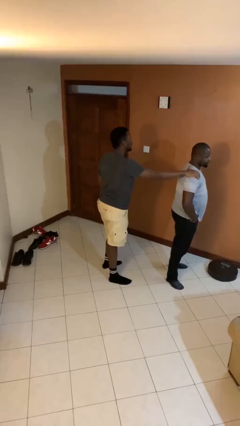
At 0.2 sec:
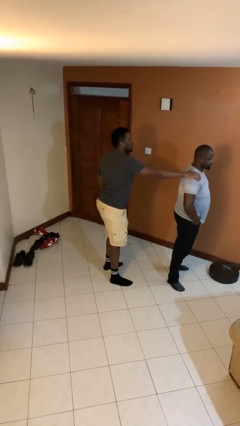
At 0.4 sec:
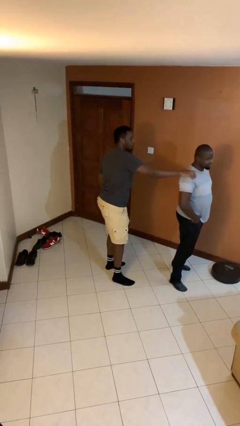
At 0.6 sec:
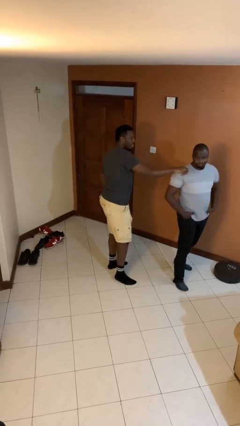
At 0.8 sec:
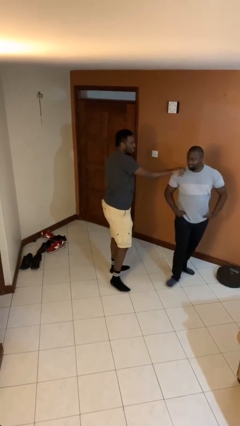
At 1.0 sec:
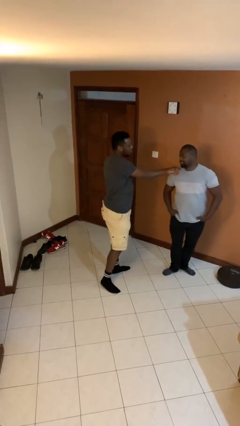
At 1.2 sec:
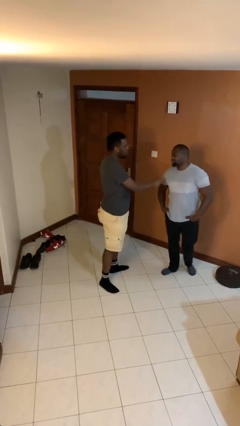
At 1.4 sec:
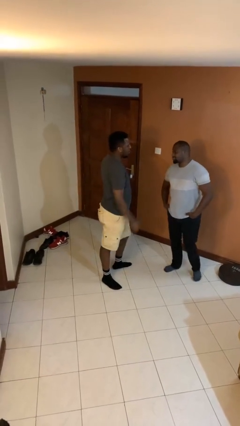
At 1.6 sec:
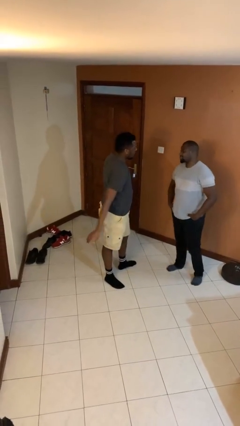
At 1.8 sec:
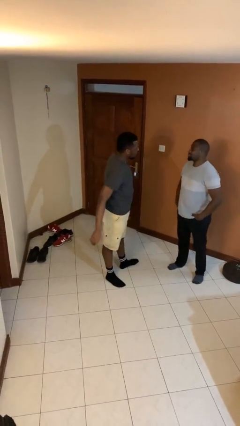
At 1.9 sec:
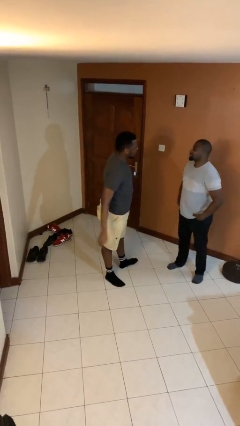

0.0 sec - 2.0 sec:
person spins person around

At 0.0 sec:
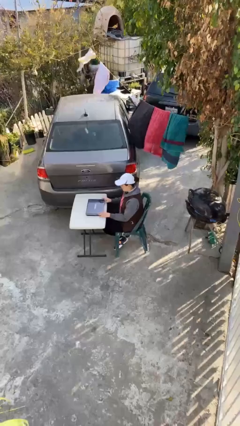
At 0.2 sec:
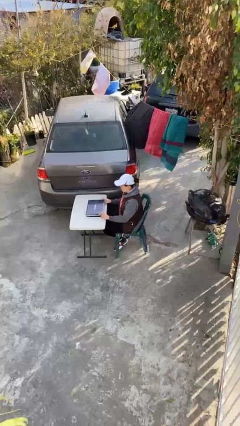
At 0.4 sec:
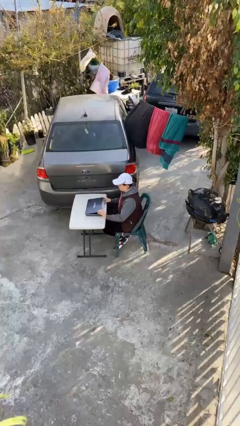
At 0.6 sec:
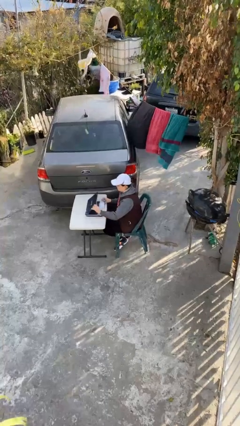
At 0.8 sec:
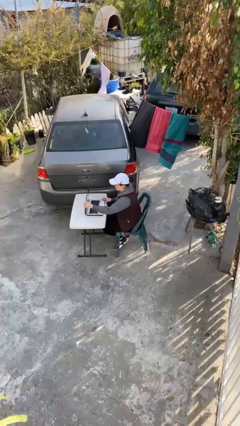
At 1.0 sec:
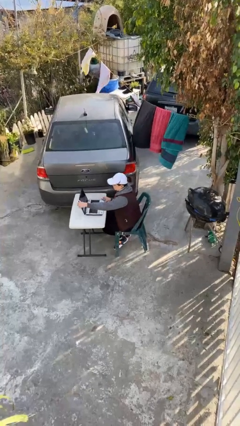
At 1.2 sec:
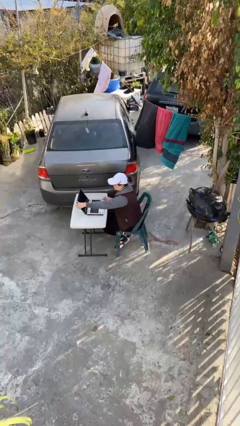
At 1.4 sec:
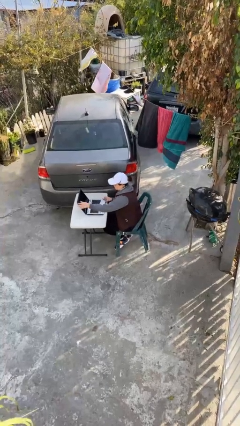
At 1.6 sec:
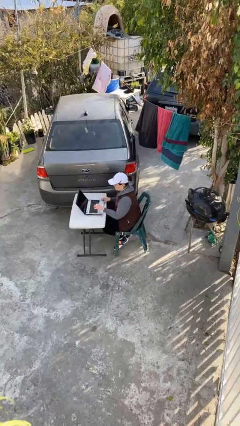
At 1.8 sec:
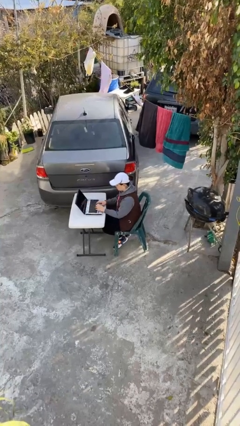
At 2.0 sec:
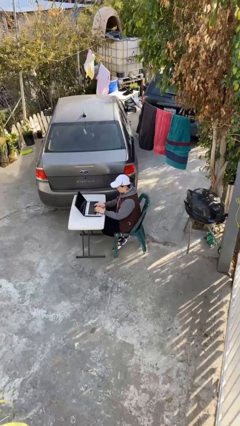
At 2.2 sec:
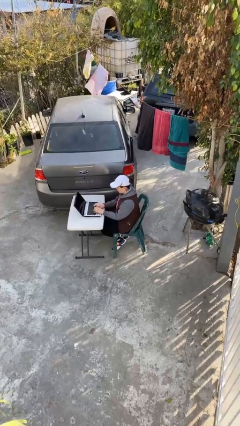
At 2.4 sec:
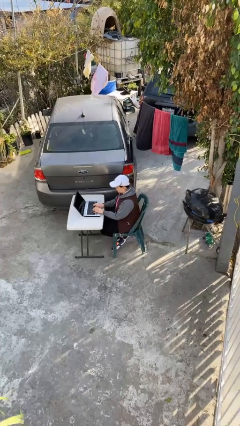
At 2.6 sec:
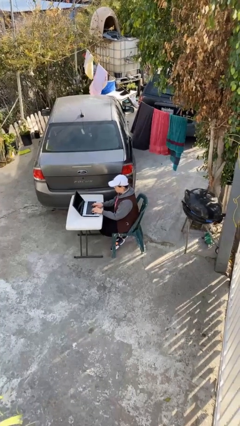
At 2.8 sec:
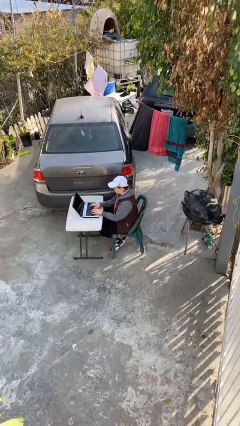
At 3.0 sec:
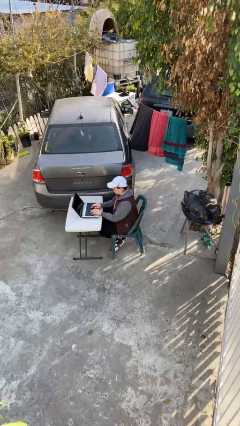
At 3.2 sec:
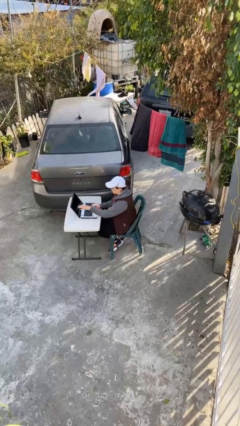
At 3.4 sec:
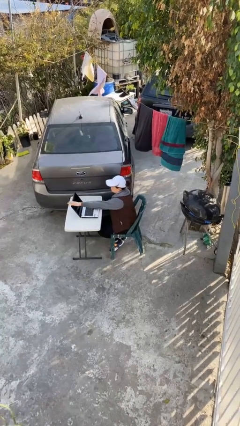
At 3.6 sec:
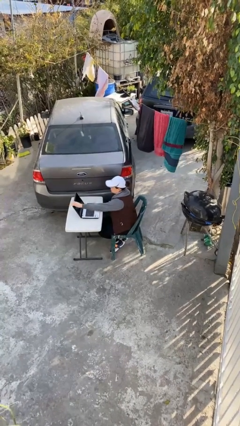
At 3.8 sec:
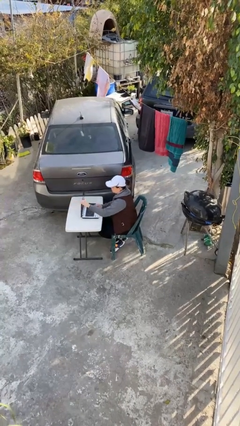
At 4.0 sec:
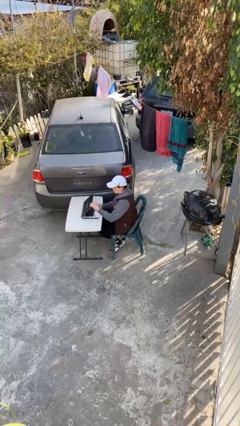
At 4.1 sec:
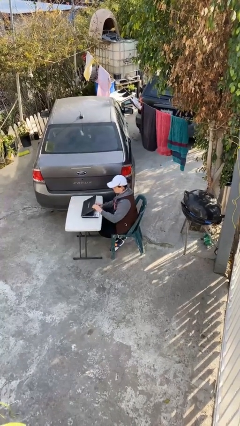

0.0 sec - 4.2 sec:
person interacts with laptop

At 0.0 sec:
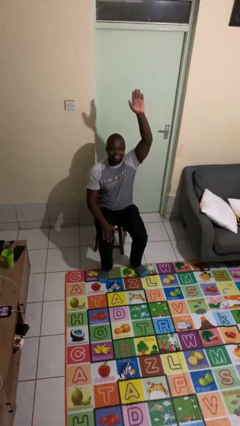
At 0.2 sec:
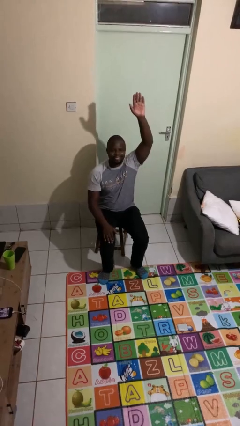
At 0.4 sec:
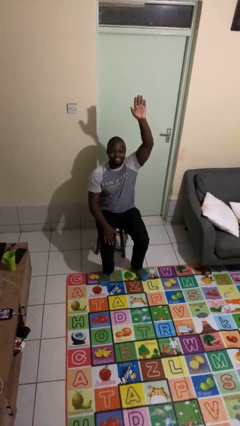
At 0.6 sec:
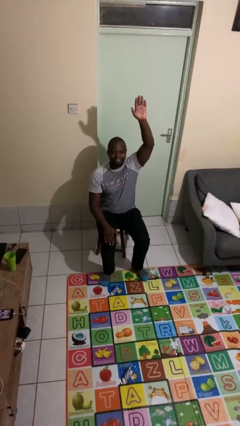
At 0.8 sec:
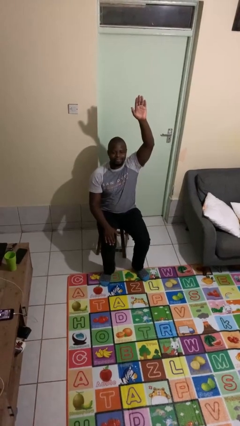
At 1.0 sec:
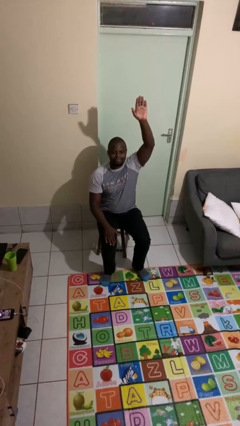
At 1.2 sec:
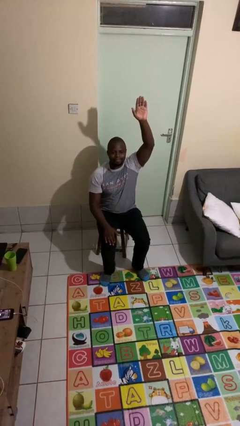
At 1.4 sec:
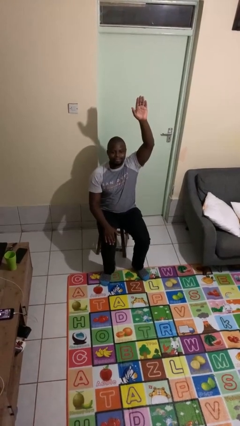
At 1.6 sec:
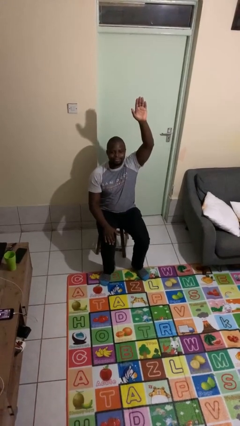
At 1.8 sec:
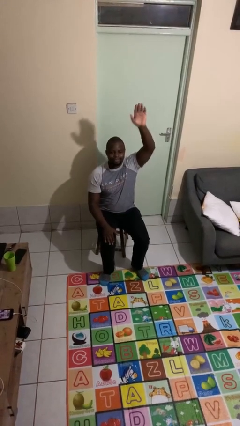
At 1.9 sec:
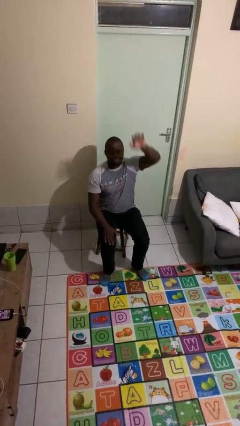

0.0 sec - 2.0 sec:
person gestures raise hand

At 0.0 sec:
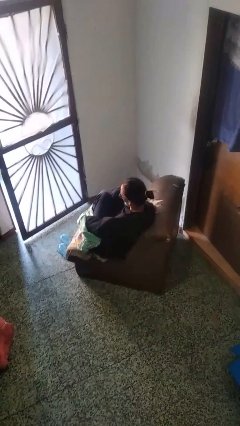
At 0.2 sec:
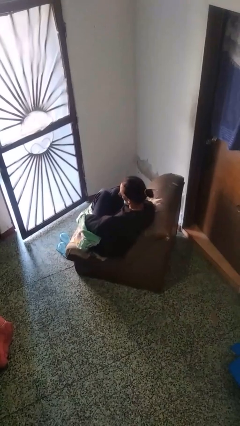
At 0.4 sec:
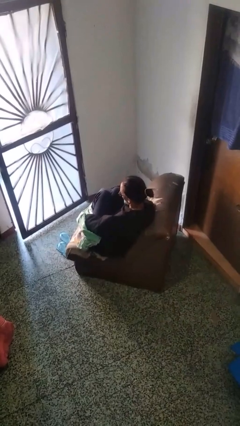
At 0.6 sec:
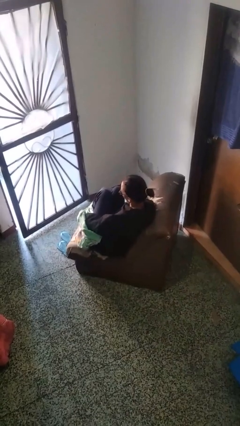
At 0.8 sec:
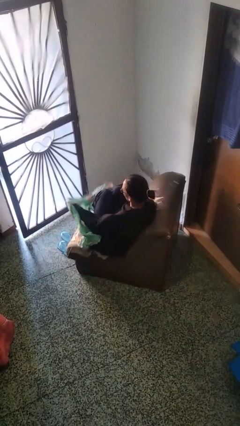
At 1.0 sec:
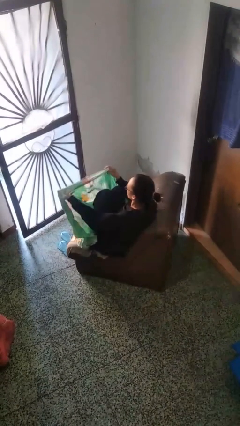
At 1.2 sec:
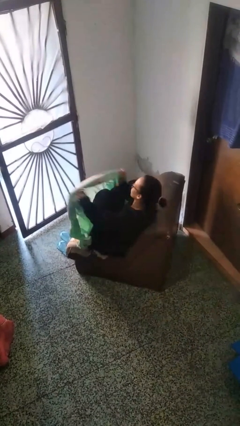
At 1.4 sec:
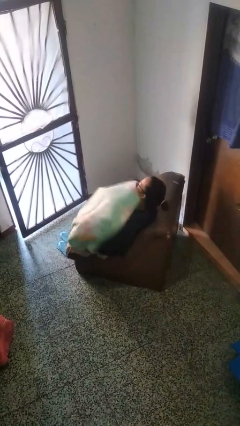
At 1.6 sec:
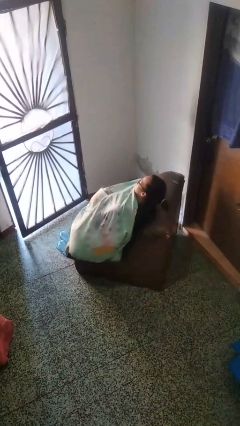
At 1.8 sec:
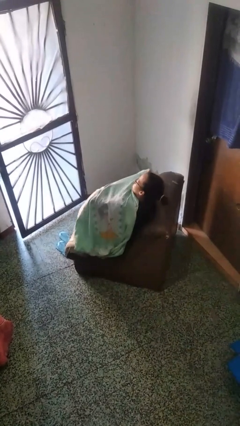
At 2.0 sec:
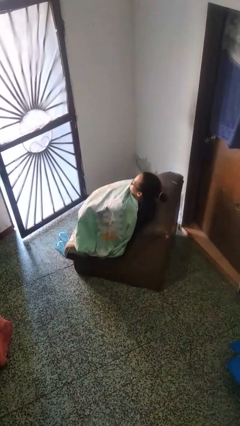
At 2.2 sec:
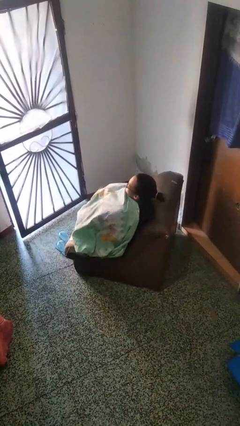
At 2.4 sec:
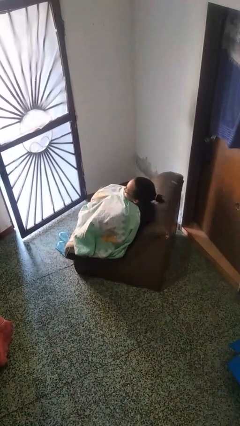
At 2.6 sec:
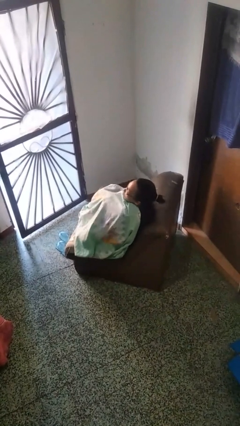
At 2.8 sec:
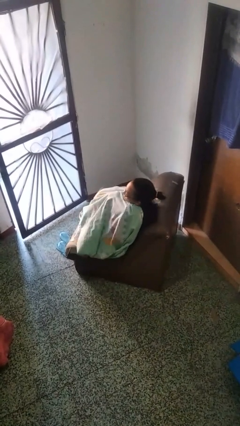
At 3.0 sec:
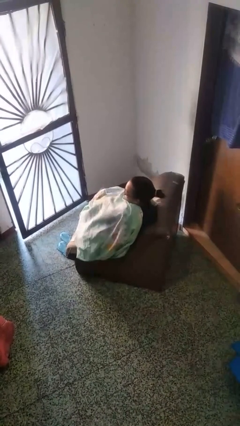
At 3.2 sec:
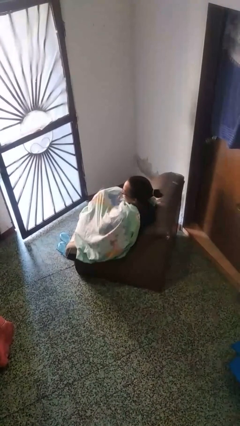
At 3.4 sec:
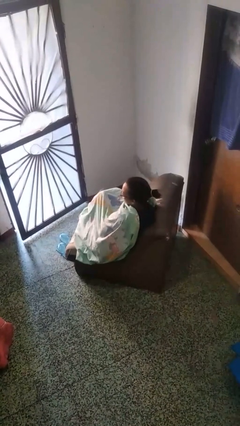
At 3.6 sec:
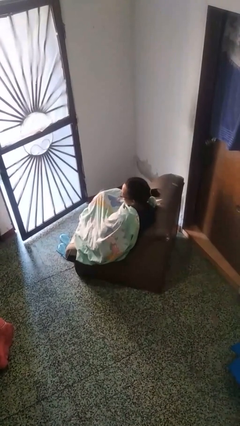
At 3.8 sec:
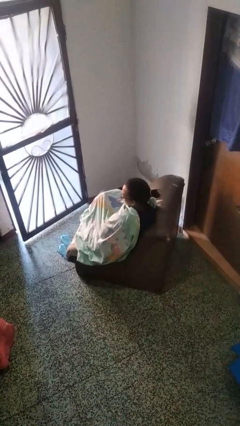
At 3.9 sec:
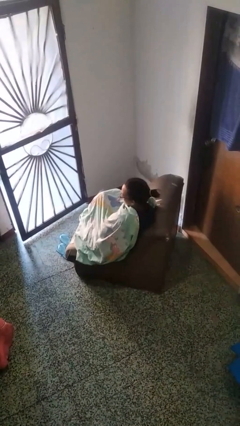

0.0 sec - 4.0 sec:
person covers with blanket

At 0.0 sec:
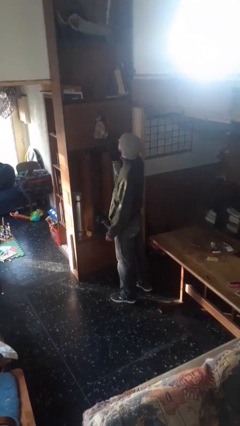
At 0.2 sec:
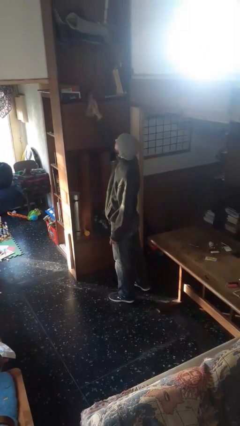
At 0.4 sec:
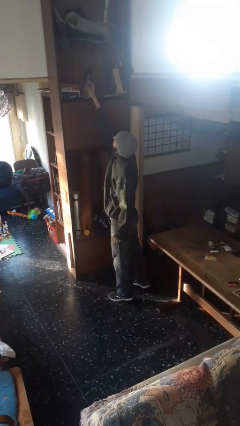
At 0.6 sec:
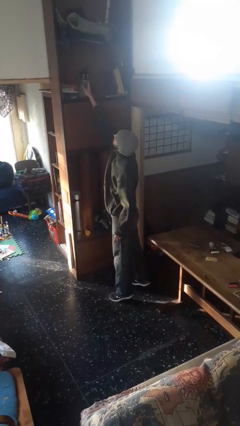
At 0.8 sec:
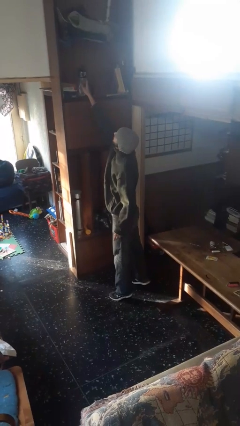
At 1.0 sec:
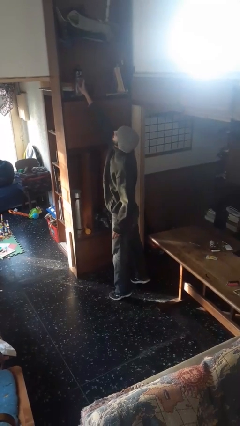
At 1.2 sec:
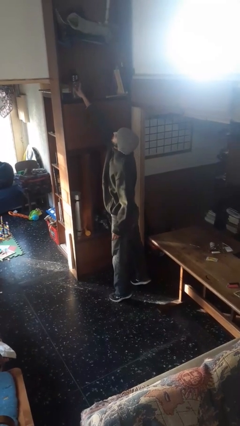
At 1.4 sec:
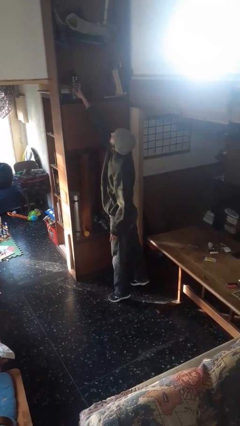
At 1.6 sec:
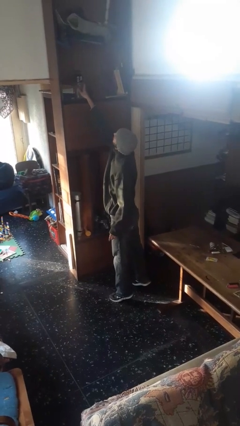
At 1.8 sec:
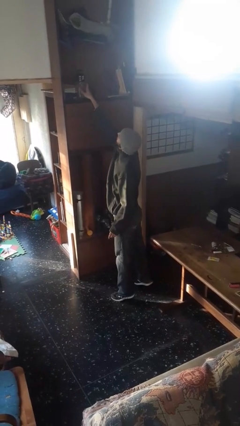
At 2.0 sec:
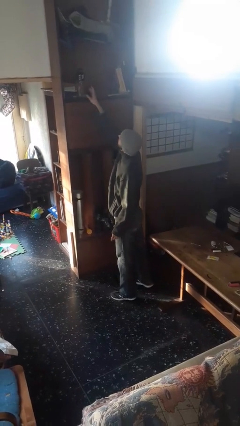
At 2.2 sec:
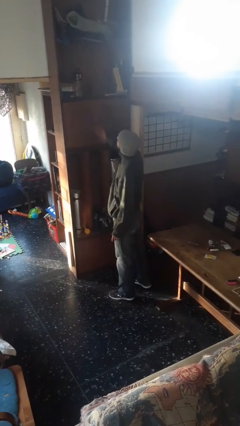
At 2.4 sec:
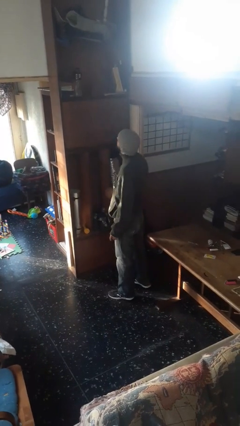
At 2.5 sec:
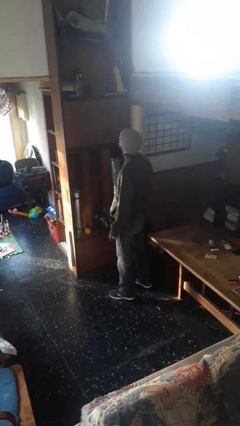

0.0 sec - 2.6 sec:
person picks up object from shelf

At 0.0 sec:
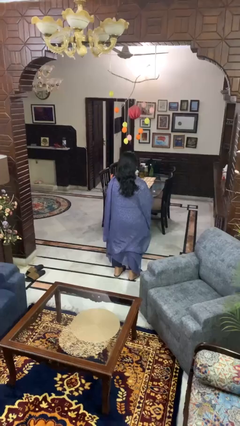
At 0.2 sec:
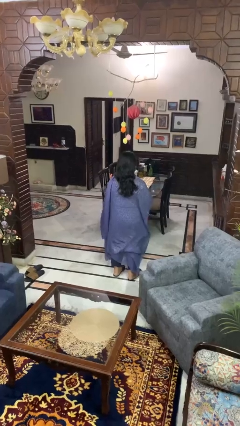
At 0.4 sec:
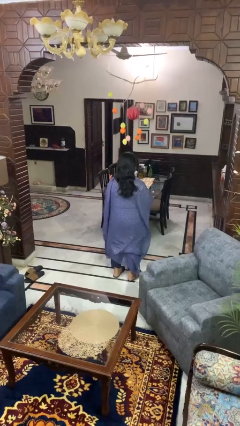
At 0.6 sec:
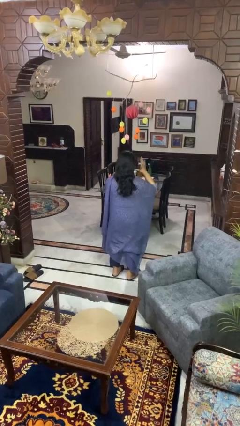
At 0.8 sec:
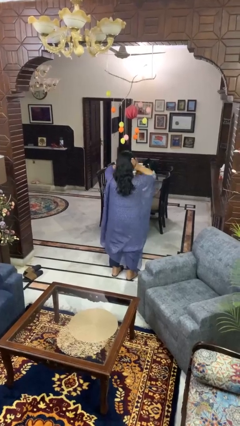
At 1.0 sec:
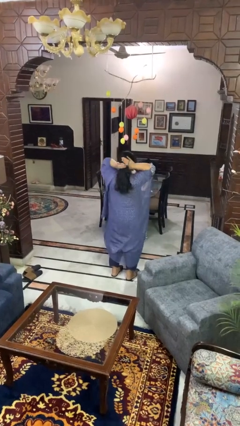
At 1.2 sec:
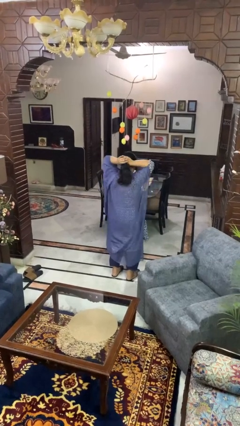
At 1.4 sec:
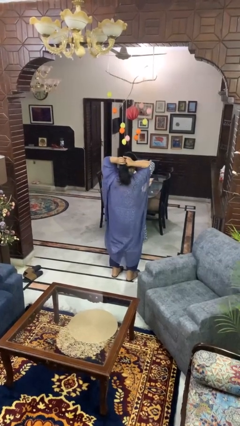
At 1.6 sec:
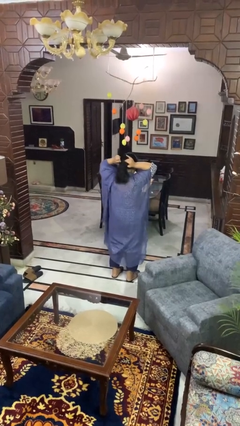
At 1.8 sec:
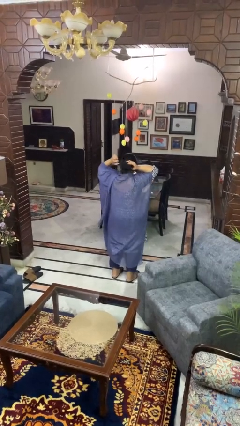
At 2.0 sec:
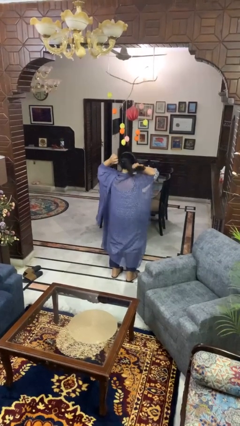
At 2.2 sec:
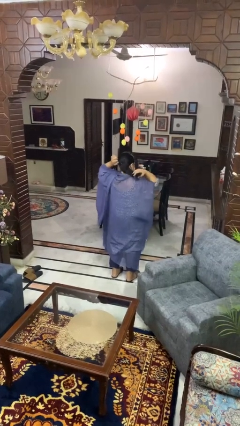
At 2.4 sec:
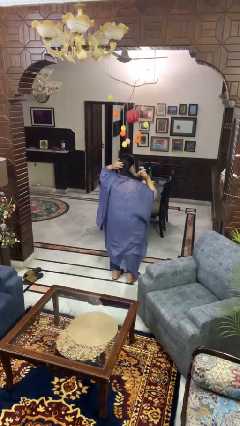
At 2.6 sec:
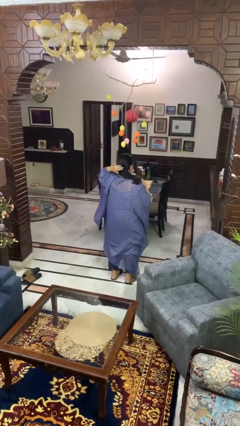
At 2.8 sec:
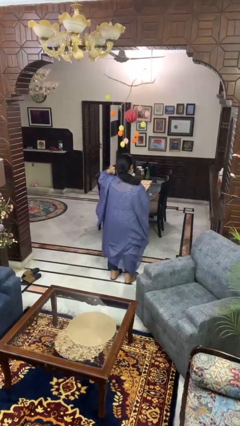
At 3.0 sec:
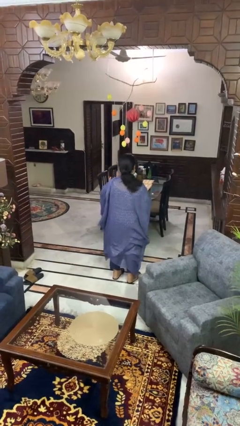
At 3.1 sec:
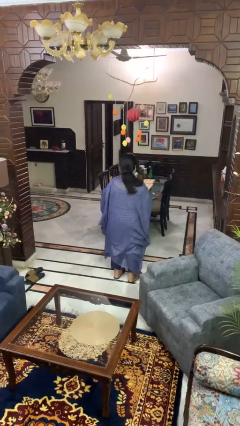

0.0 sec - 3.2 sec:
person puts hair in ponytail
